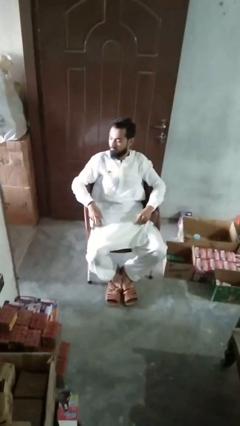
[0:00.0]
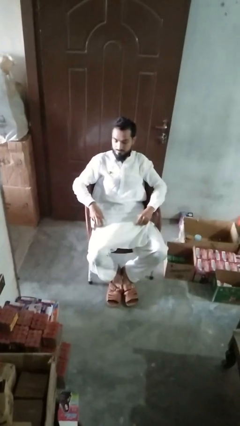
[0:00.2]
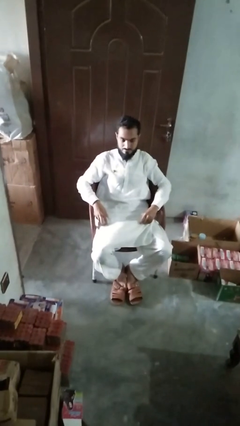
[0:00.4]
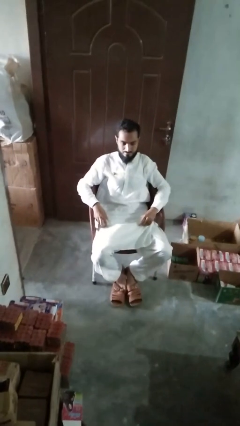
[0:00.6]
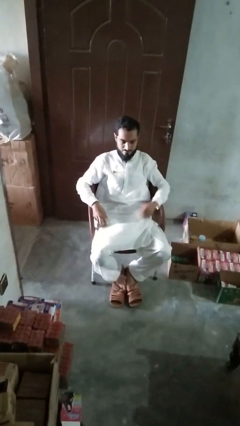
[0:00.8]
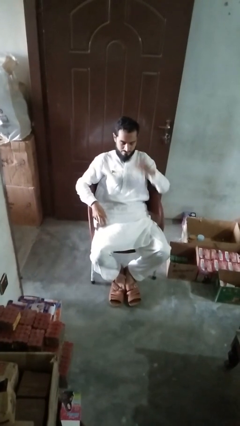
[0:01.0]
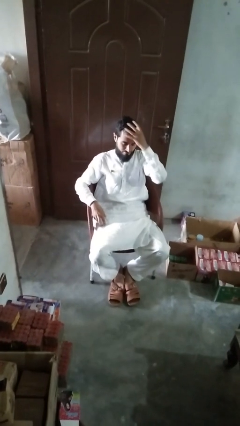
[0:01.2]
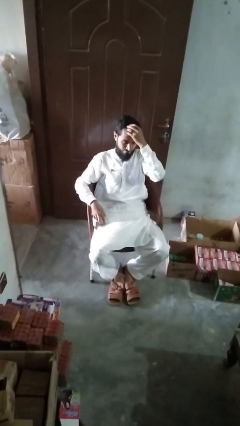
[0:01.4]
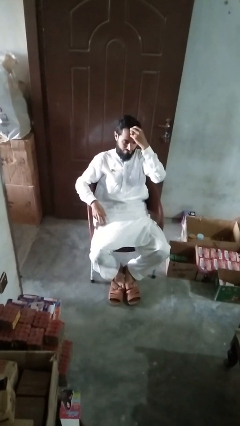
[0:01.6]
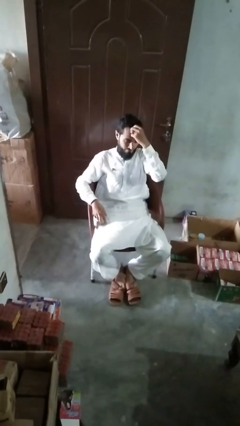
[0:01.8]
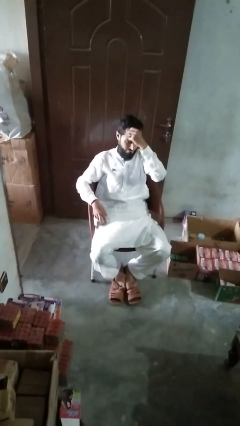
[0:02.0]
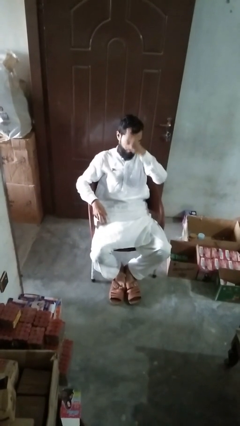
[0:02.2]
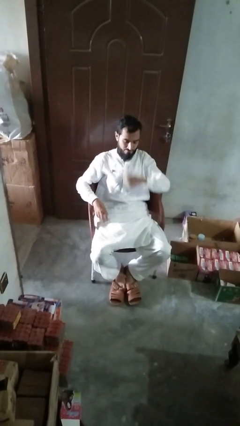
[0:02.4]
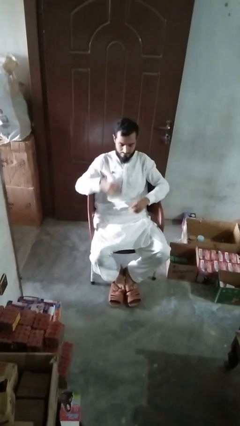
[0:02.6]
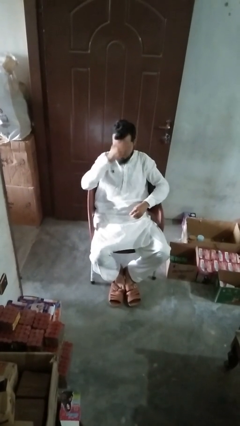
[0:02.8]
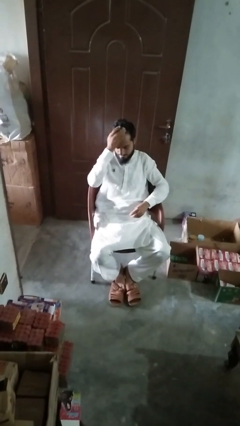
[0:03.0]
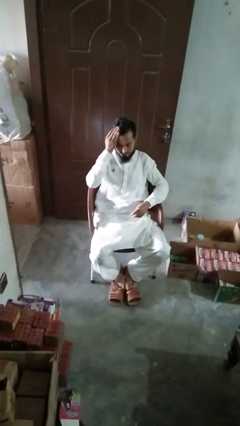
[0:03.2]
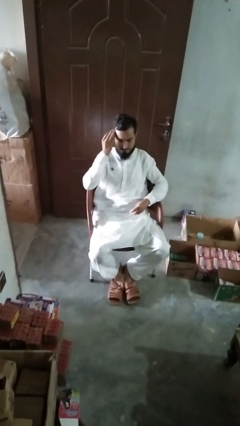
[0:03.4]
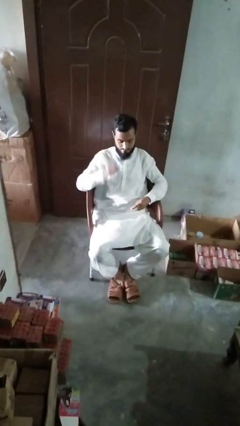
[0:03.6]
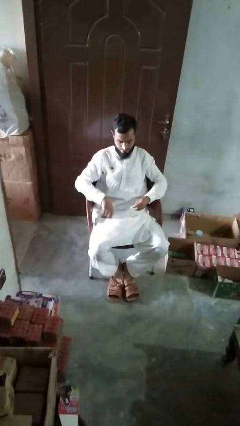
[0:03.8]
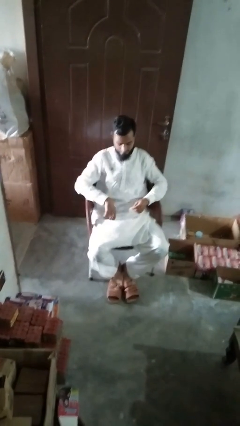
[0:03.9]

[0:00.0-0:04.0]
person takes off hairtie

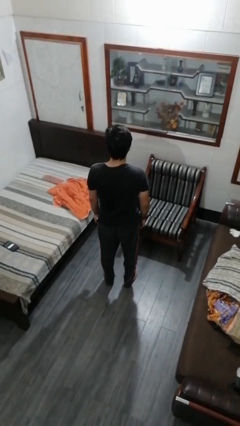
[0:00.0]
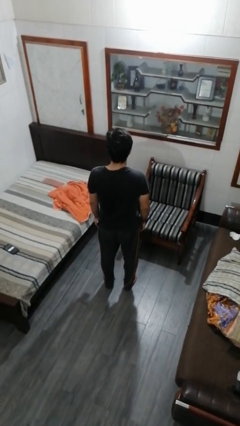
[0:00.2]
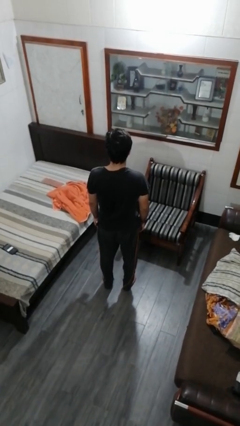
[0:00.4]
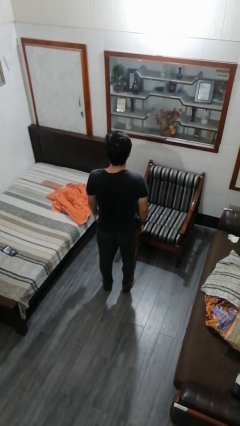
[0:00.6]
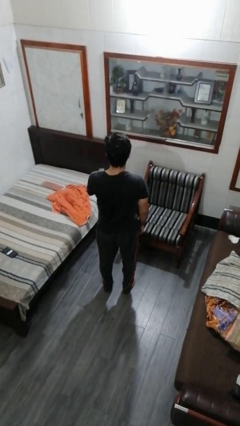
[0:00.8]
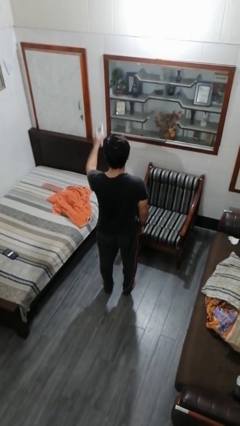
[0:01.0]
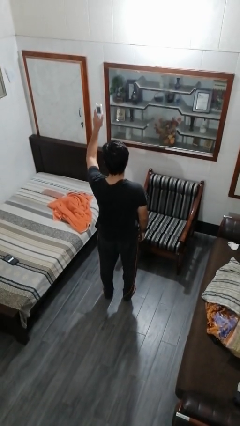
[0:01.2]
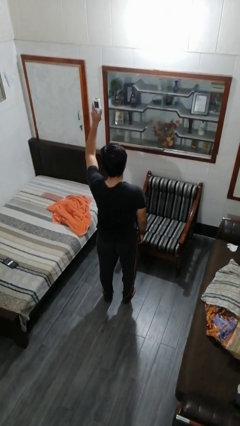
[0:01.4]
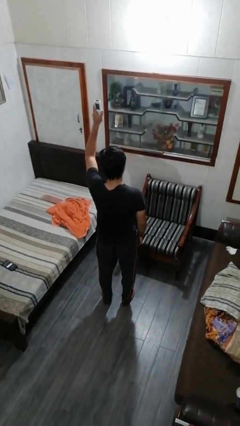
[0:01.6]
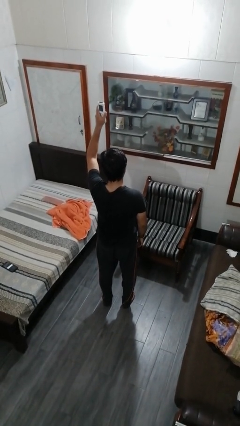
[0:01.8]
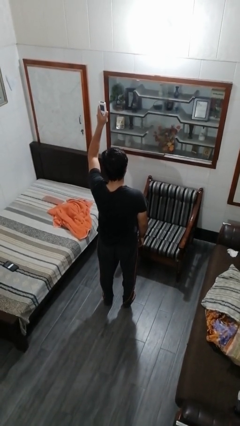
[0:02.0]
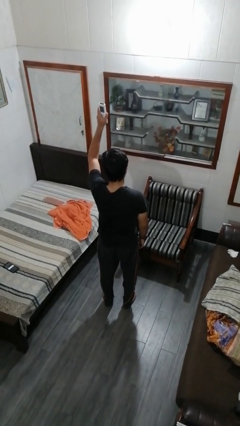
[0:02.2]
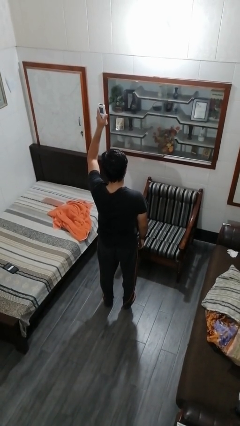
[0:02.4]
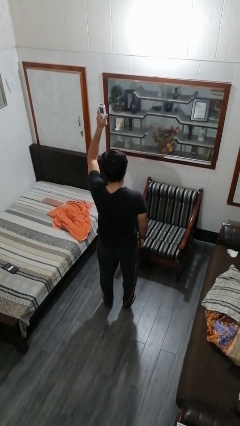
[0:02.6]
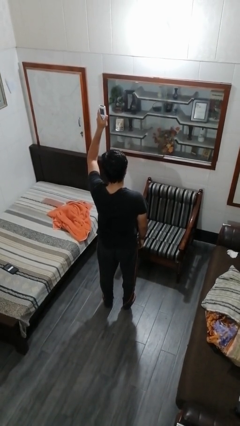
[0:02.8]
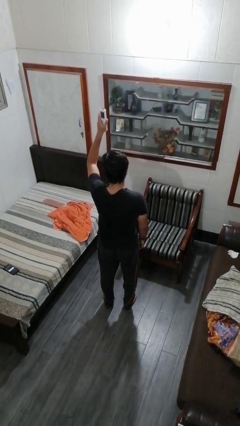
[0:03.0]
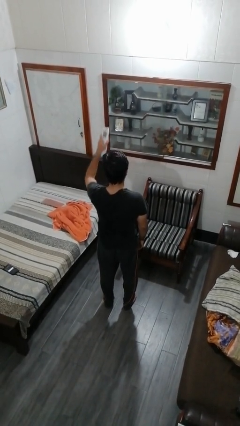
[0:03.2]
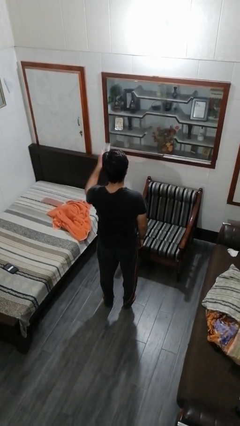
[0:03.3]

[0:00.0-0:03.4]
person holds object above head

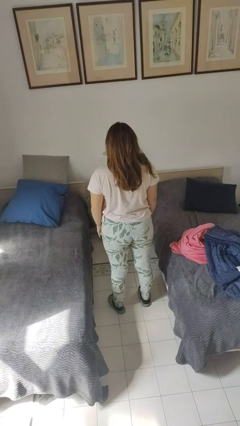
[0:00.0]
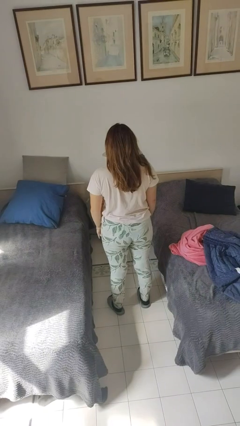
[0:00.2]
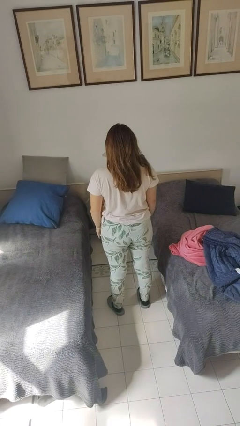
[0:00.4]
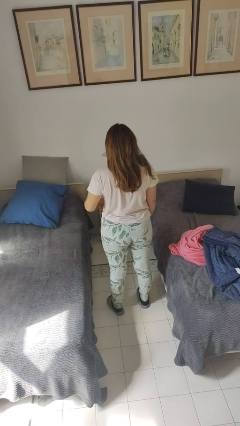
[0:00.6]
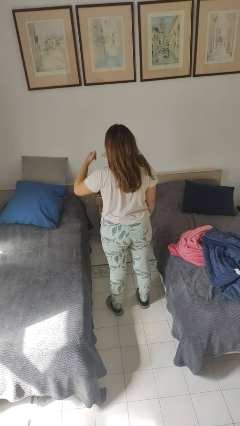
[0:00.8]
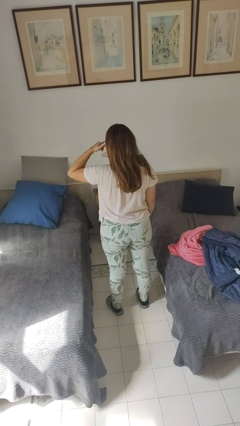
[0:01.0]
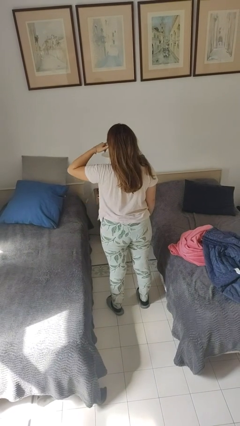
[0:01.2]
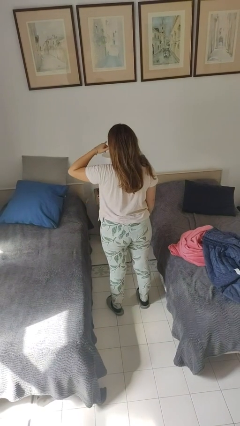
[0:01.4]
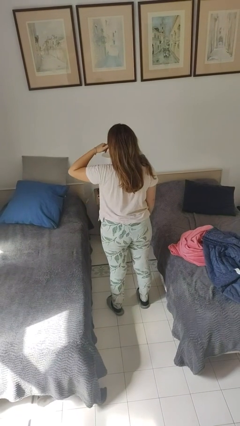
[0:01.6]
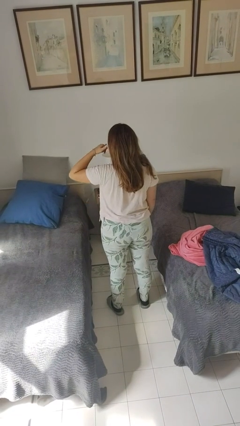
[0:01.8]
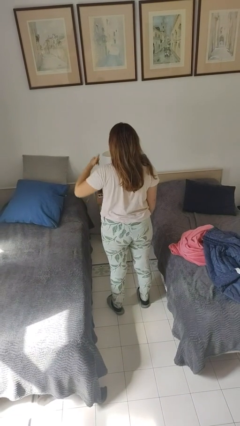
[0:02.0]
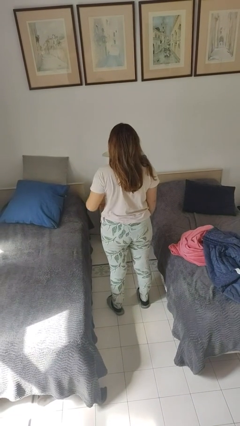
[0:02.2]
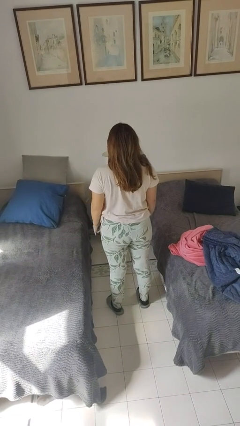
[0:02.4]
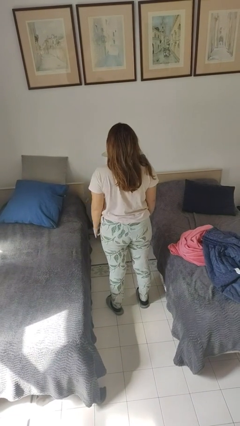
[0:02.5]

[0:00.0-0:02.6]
person gestures call me

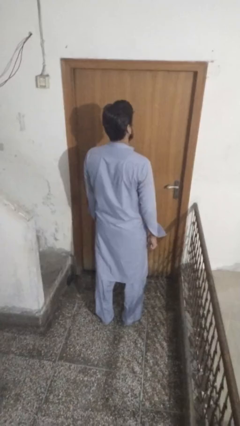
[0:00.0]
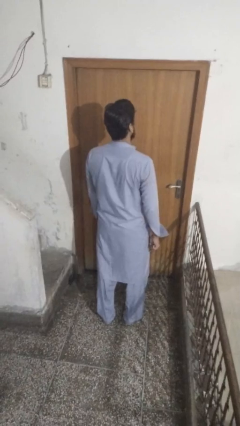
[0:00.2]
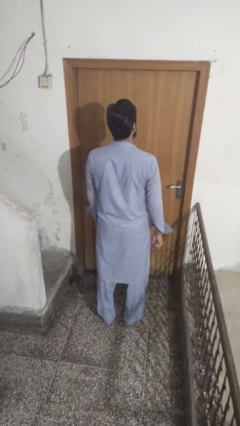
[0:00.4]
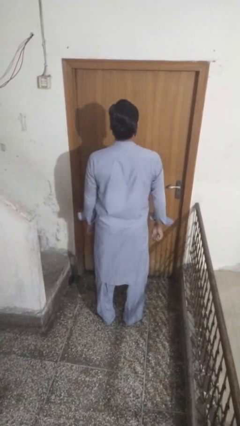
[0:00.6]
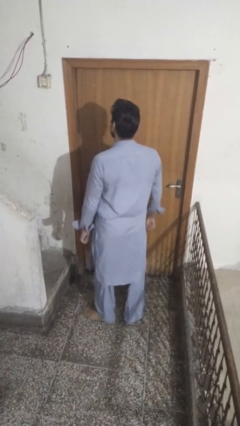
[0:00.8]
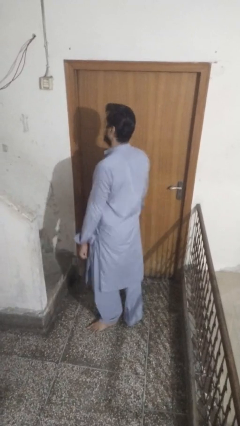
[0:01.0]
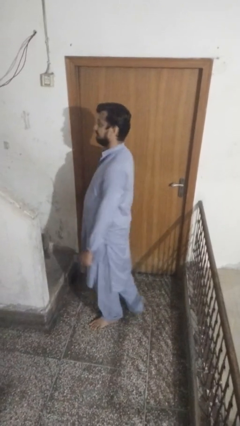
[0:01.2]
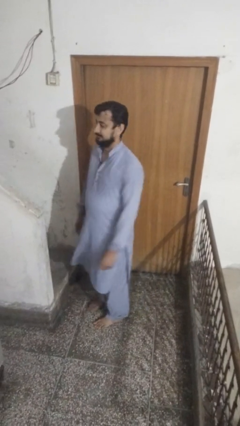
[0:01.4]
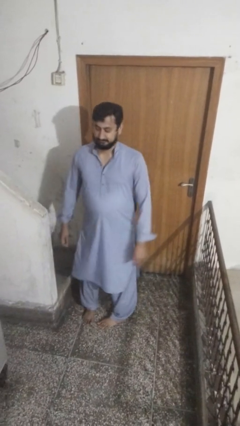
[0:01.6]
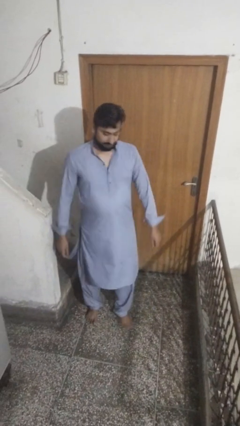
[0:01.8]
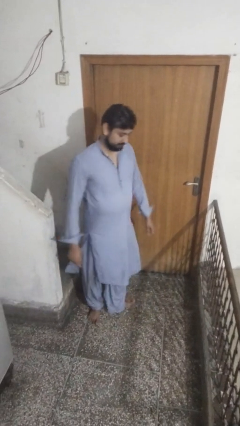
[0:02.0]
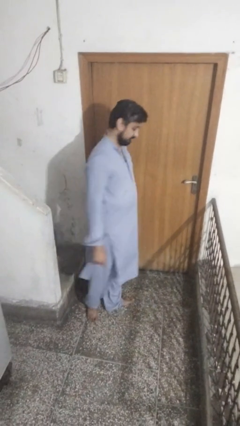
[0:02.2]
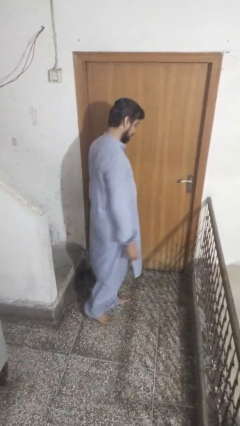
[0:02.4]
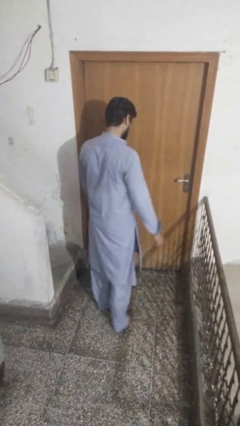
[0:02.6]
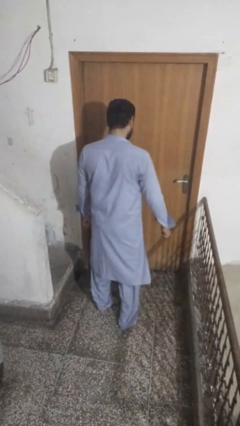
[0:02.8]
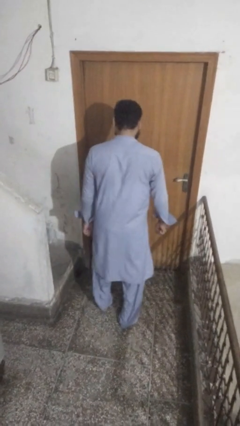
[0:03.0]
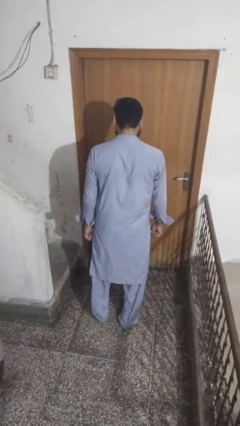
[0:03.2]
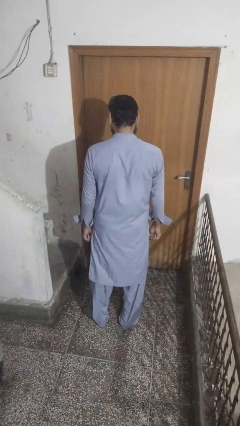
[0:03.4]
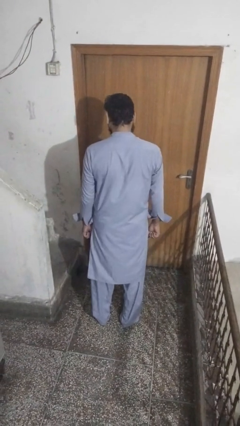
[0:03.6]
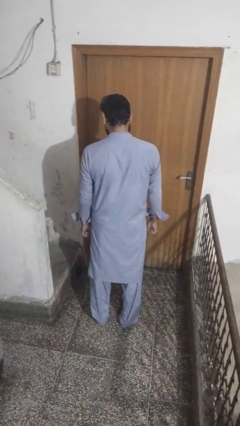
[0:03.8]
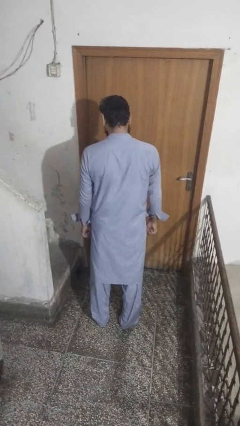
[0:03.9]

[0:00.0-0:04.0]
person twirls

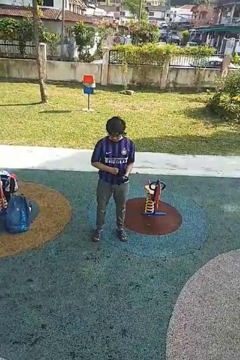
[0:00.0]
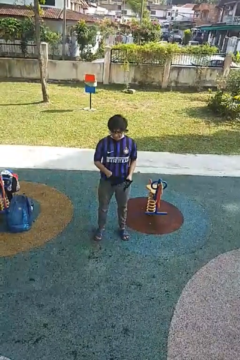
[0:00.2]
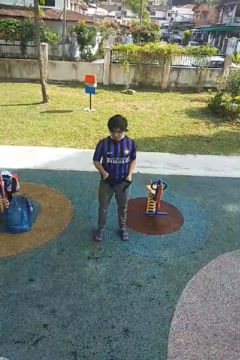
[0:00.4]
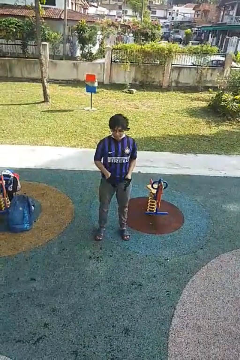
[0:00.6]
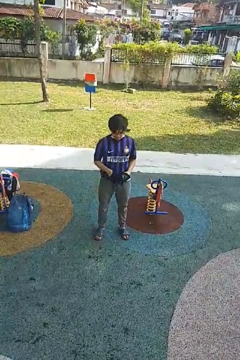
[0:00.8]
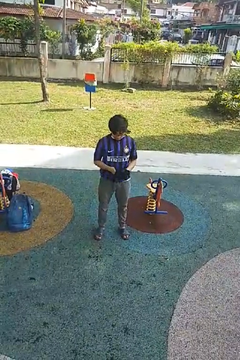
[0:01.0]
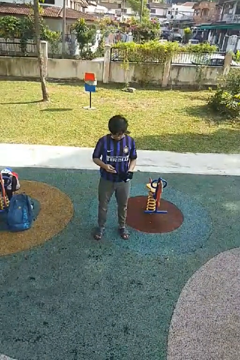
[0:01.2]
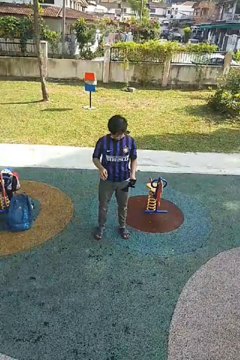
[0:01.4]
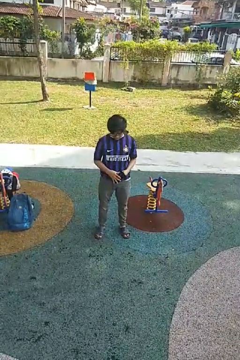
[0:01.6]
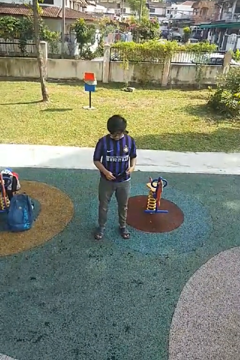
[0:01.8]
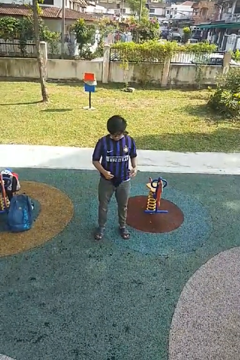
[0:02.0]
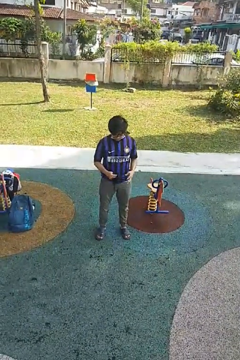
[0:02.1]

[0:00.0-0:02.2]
person takes off gloves

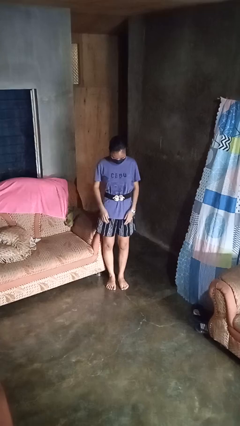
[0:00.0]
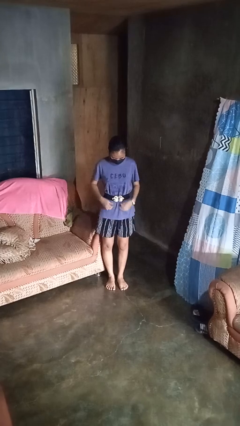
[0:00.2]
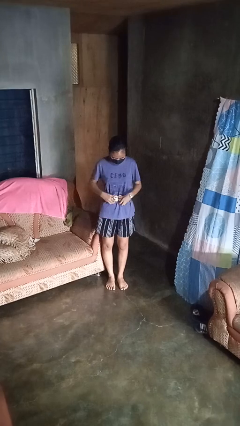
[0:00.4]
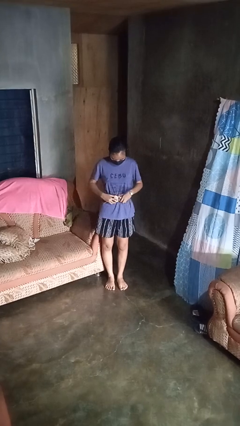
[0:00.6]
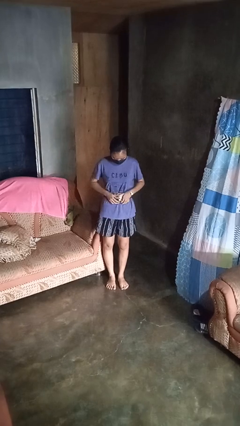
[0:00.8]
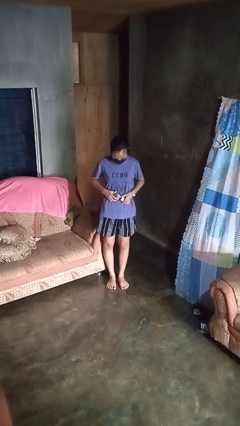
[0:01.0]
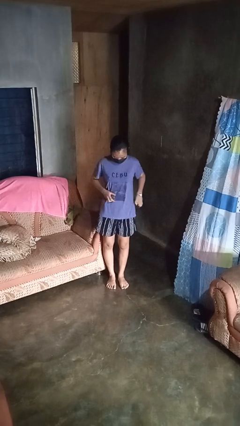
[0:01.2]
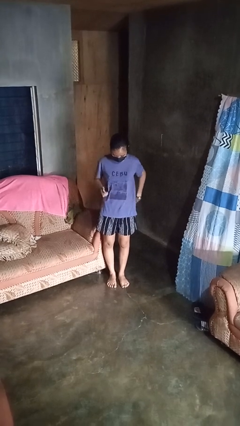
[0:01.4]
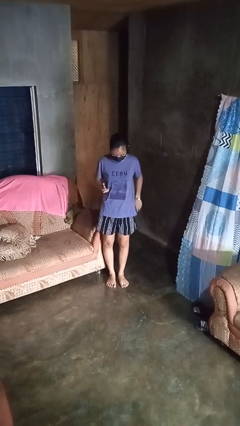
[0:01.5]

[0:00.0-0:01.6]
person takes off belt
